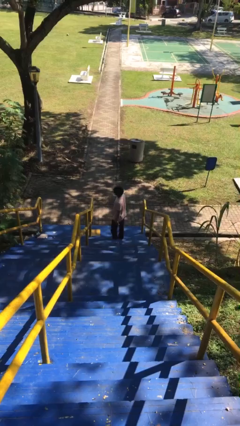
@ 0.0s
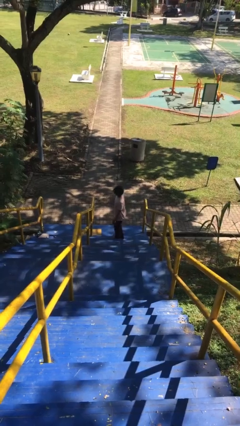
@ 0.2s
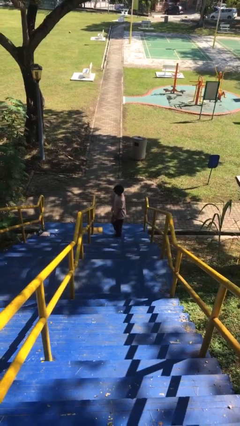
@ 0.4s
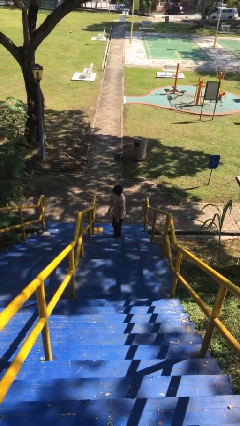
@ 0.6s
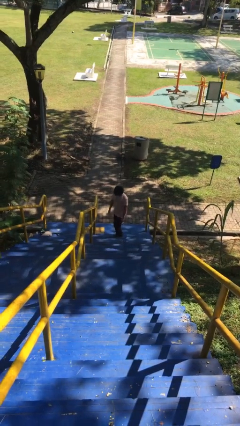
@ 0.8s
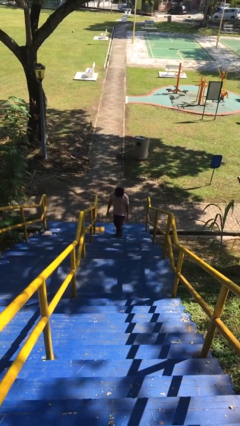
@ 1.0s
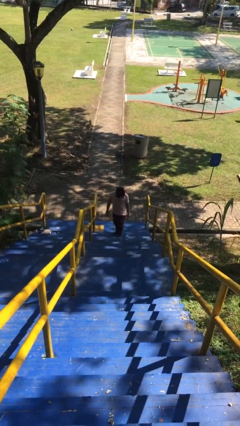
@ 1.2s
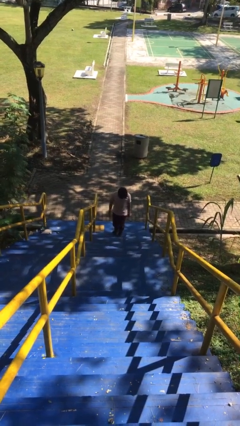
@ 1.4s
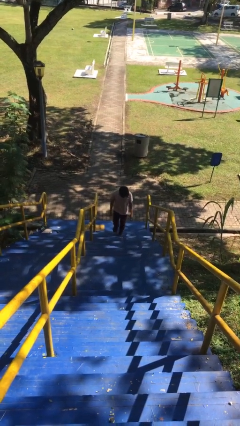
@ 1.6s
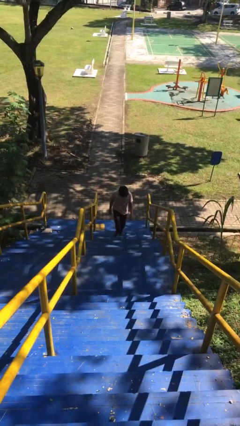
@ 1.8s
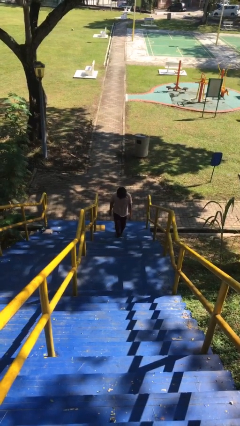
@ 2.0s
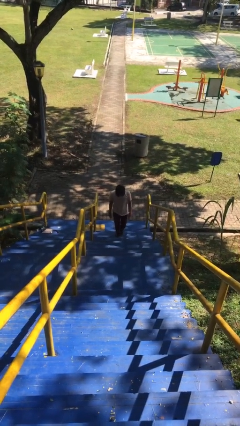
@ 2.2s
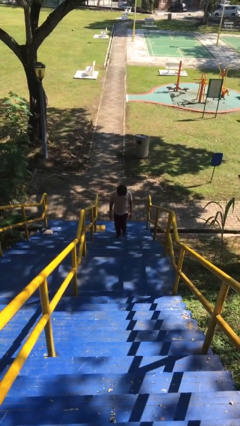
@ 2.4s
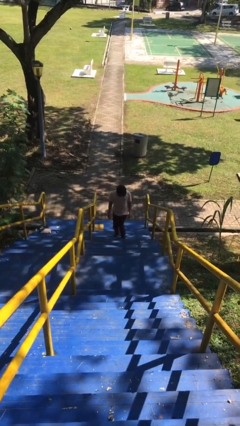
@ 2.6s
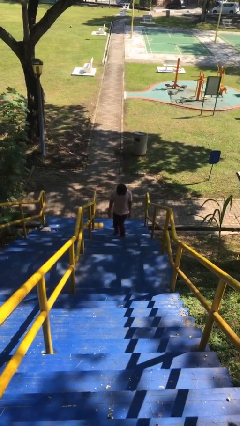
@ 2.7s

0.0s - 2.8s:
person climbs up stairs

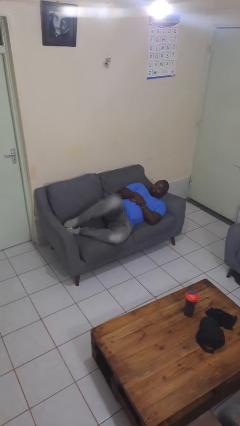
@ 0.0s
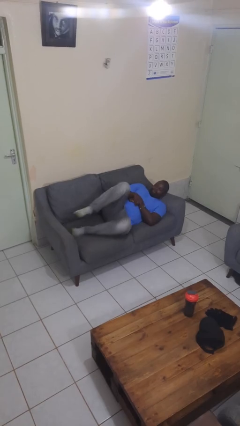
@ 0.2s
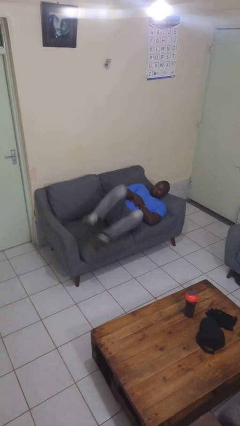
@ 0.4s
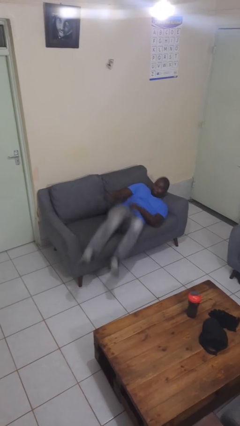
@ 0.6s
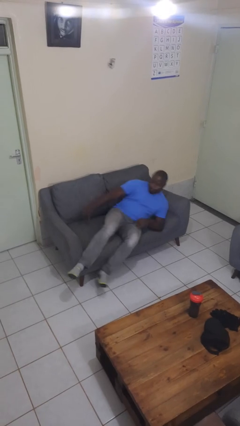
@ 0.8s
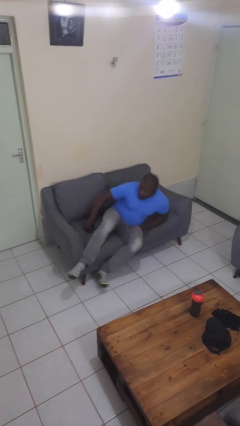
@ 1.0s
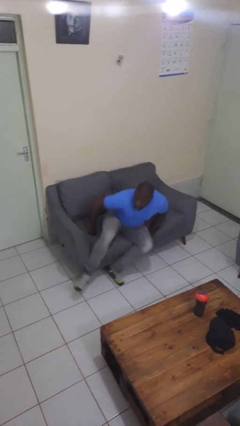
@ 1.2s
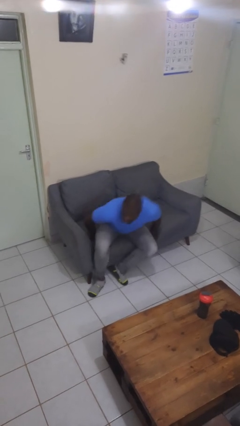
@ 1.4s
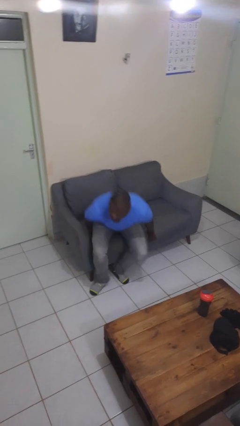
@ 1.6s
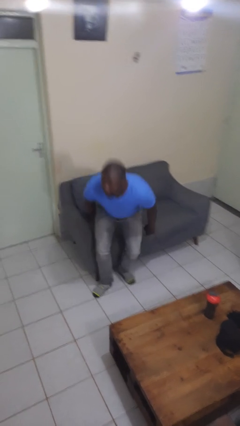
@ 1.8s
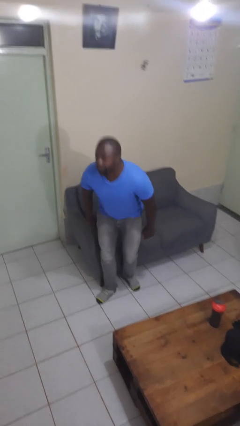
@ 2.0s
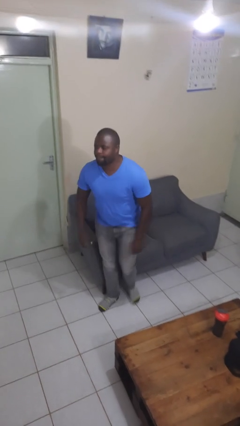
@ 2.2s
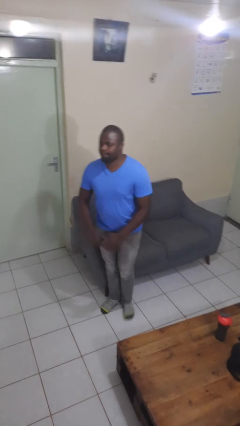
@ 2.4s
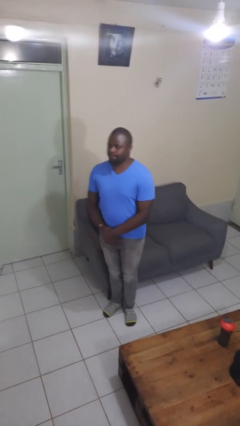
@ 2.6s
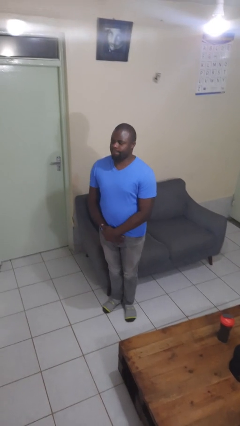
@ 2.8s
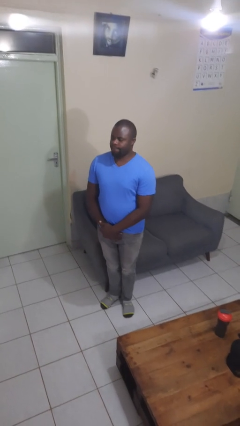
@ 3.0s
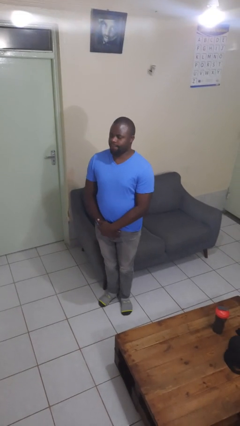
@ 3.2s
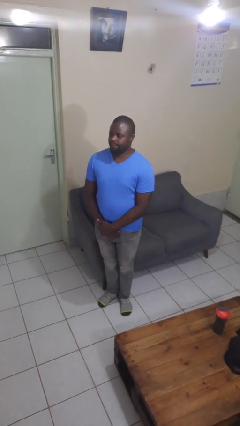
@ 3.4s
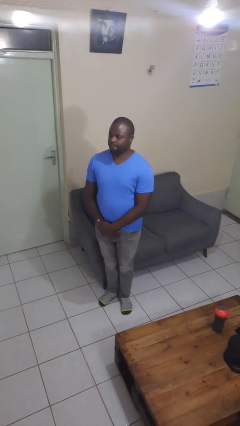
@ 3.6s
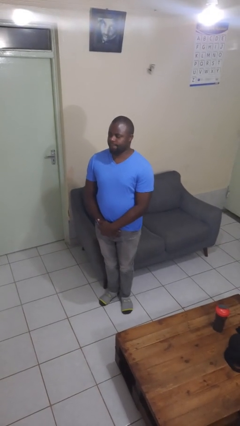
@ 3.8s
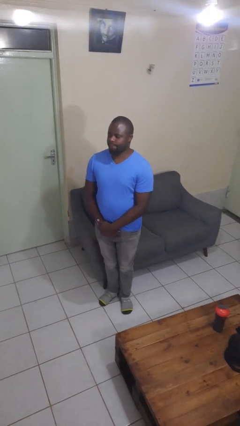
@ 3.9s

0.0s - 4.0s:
person stands up

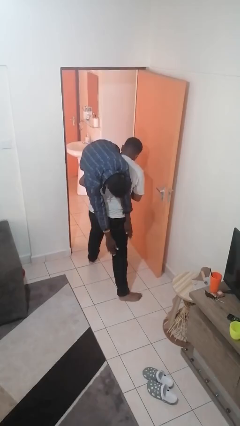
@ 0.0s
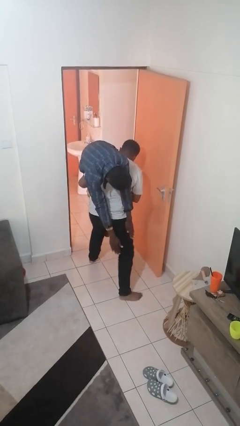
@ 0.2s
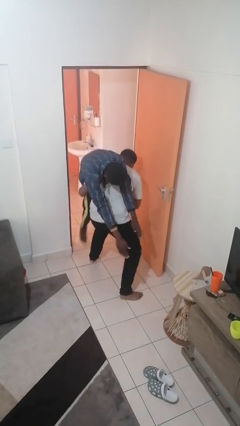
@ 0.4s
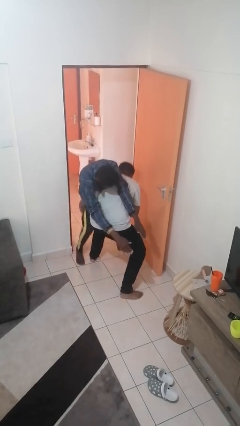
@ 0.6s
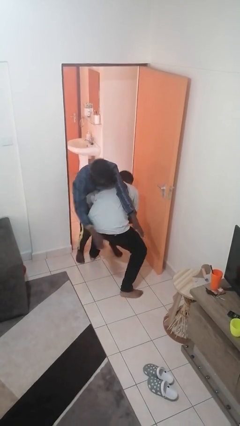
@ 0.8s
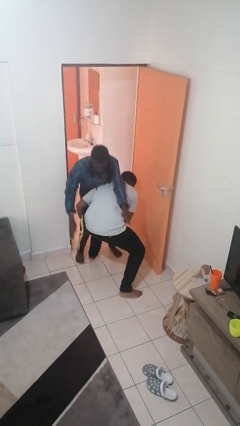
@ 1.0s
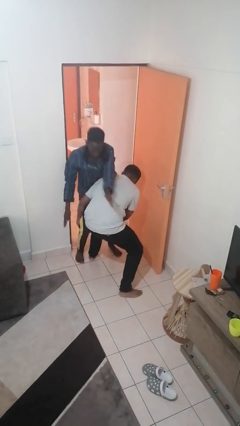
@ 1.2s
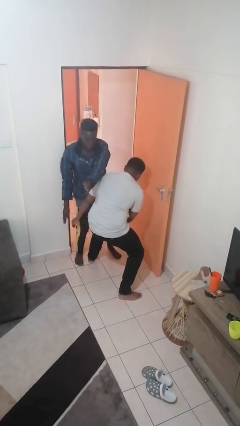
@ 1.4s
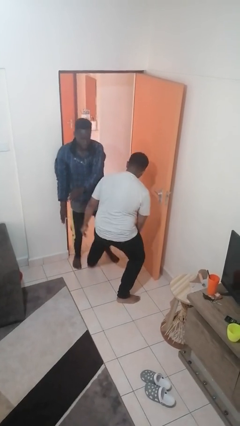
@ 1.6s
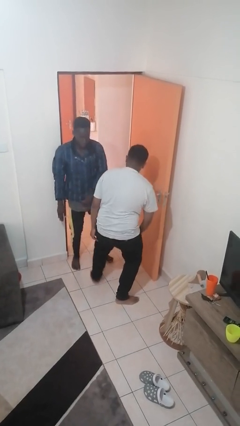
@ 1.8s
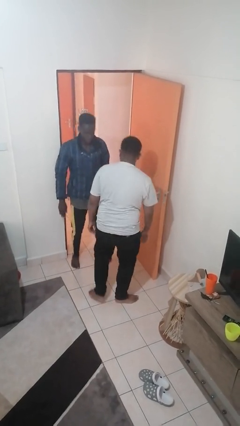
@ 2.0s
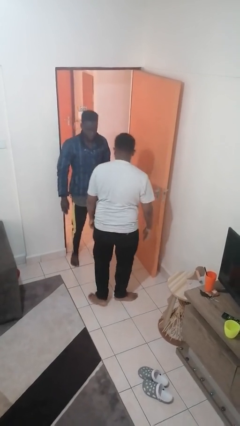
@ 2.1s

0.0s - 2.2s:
person puts down person

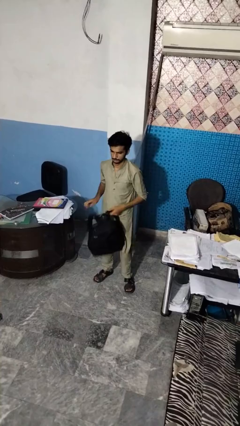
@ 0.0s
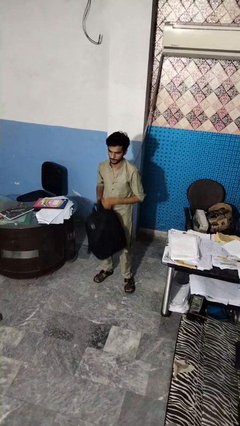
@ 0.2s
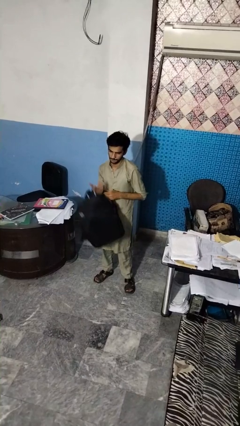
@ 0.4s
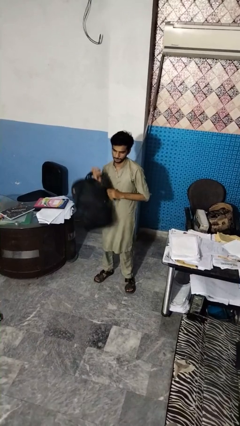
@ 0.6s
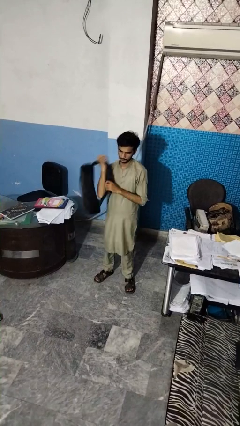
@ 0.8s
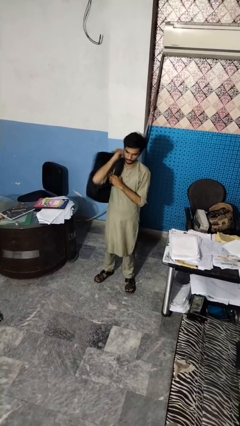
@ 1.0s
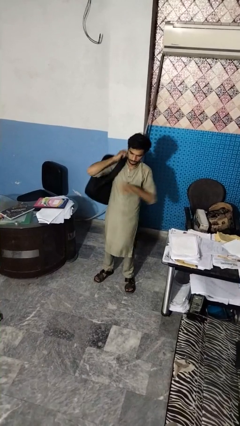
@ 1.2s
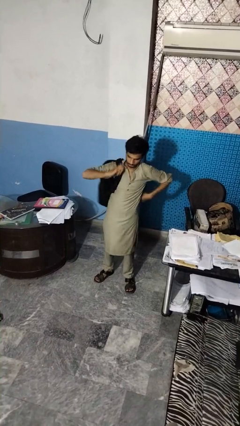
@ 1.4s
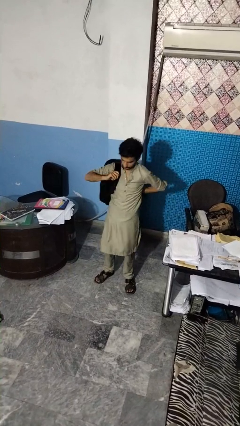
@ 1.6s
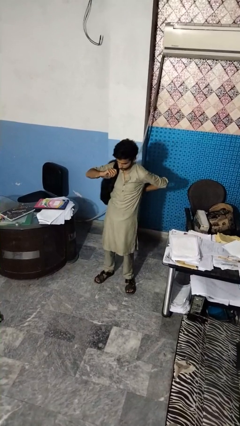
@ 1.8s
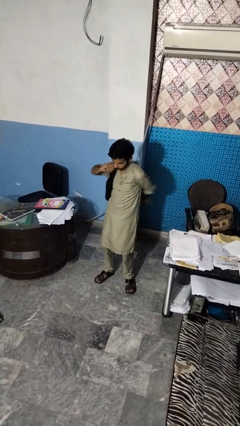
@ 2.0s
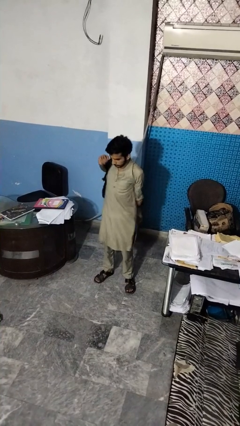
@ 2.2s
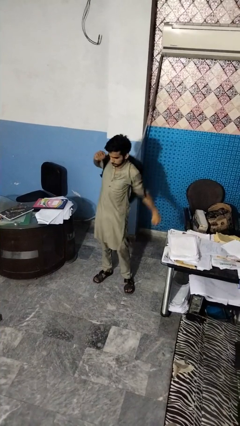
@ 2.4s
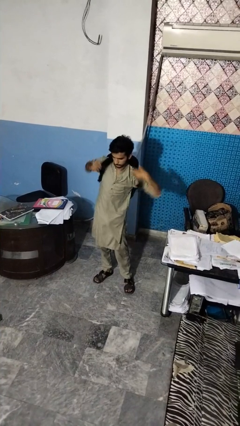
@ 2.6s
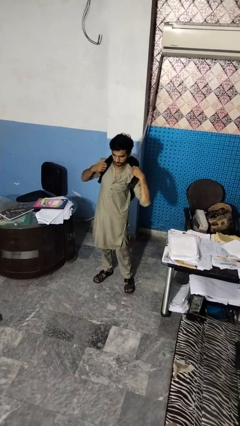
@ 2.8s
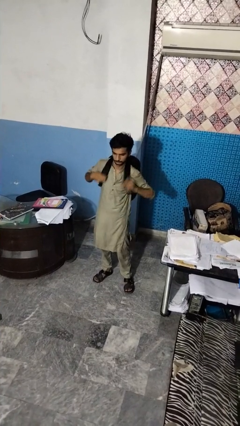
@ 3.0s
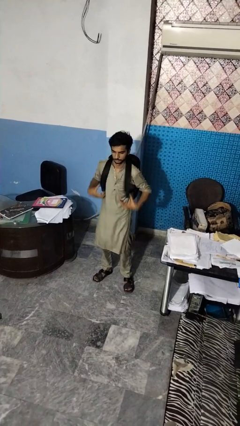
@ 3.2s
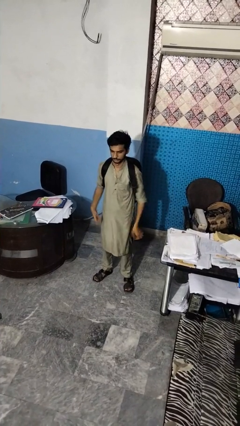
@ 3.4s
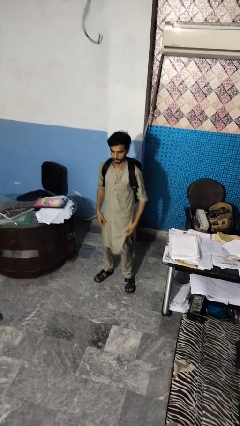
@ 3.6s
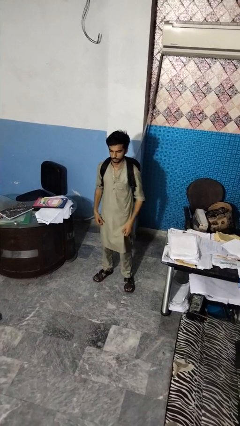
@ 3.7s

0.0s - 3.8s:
person puts on backpack

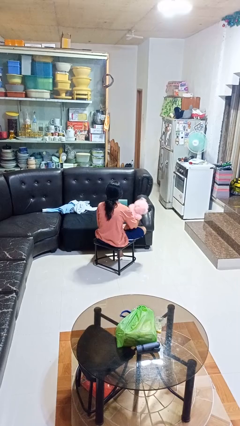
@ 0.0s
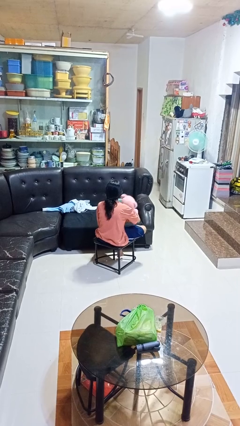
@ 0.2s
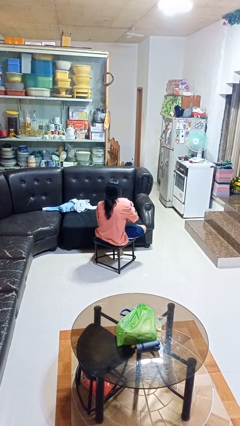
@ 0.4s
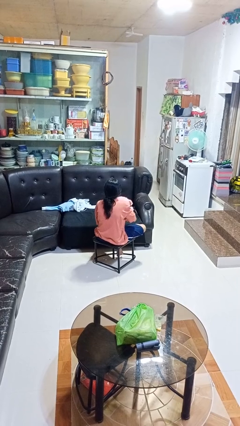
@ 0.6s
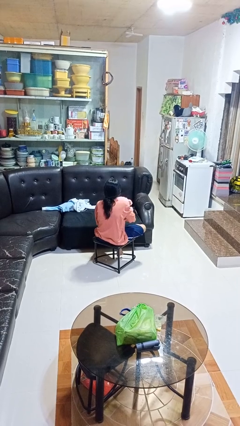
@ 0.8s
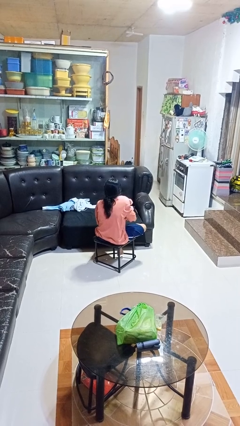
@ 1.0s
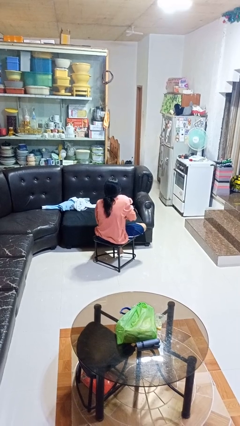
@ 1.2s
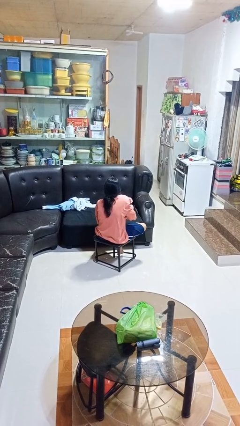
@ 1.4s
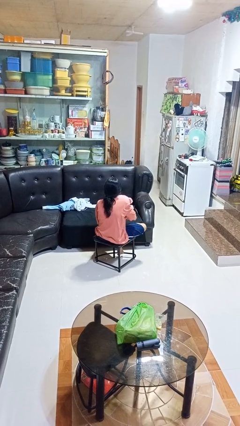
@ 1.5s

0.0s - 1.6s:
person hugs stuffed animal

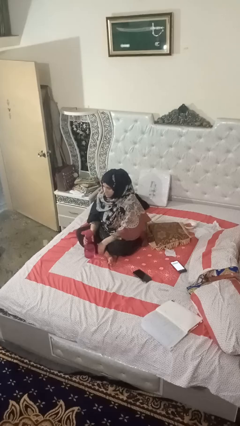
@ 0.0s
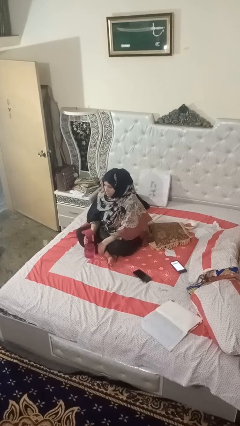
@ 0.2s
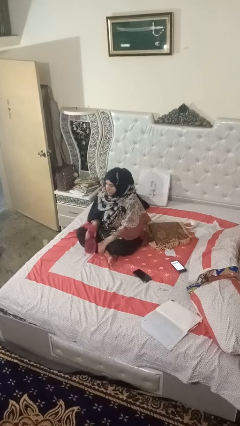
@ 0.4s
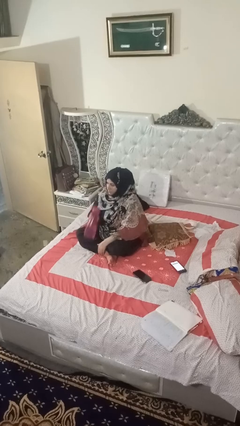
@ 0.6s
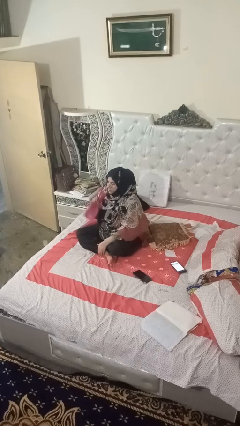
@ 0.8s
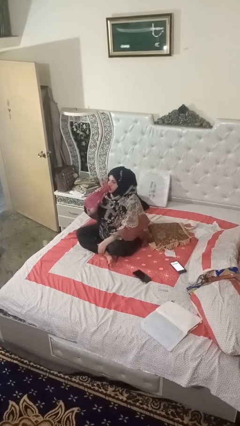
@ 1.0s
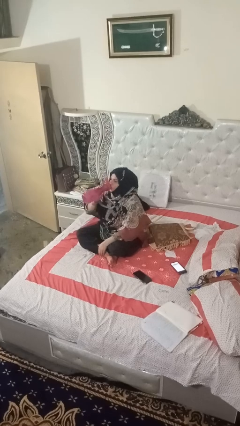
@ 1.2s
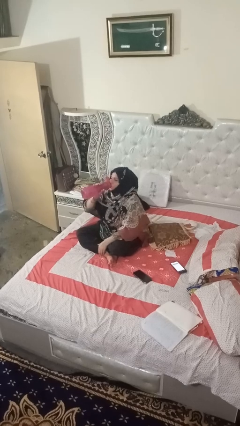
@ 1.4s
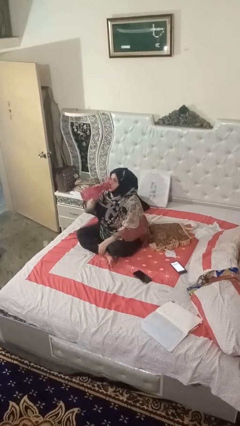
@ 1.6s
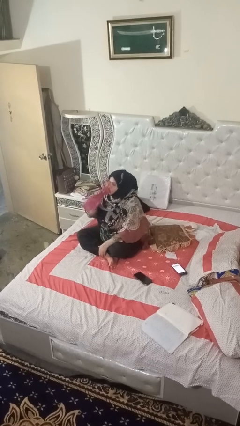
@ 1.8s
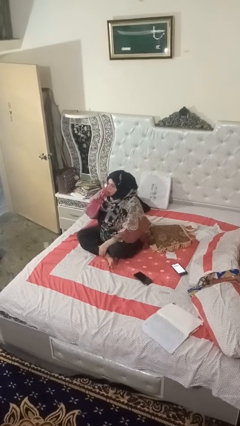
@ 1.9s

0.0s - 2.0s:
person drinks from bottle

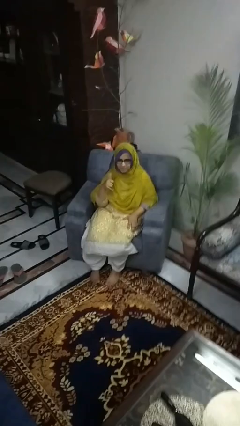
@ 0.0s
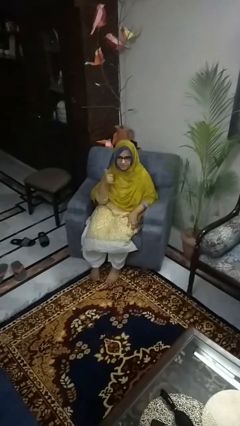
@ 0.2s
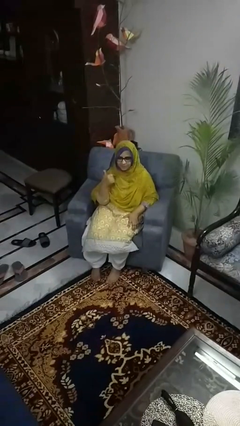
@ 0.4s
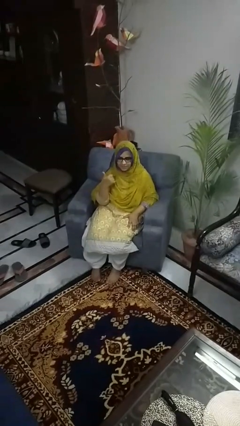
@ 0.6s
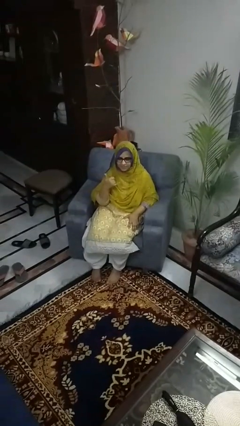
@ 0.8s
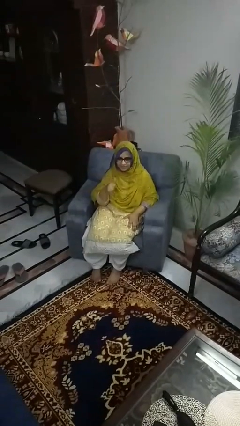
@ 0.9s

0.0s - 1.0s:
person gestures hang loose
